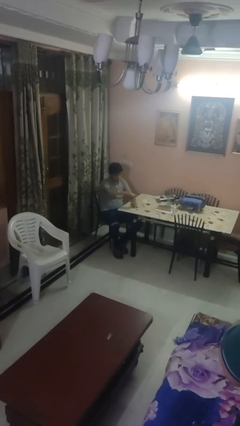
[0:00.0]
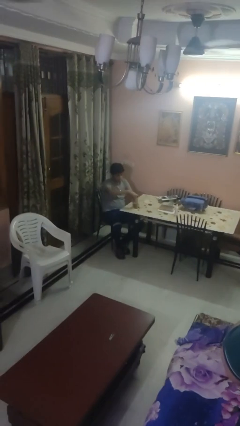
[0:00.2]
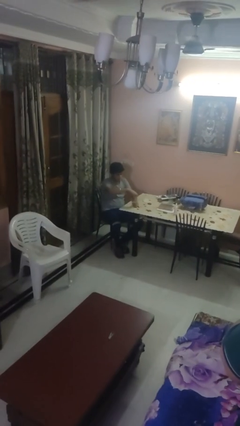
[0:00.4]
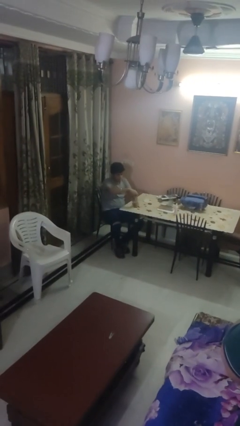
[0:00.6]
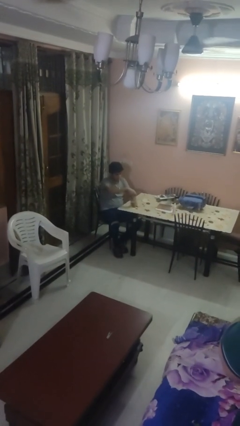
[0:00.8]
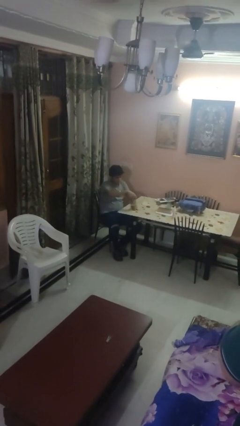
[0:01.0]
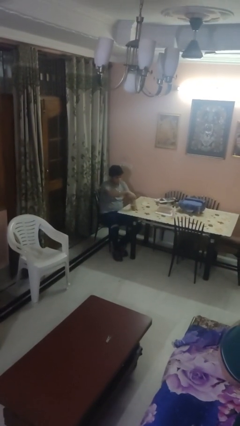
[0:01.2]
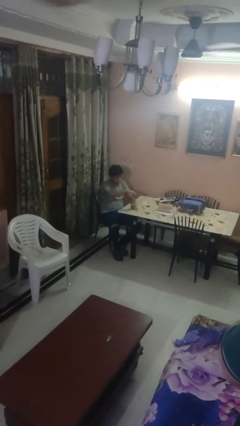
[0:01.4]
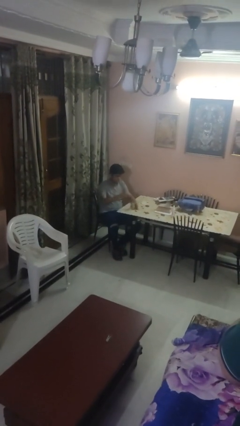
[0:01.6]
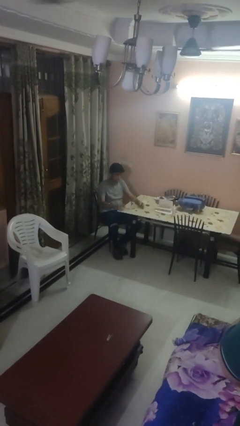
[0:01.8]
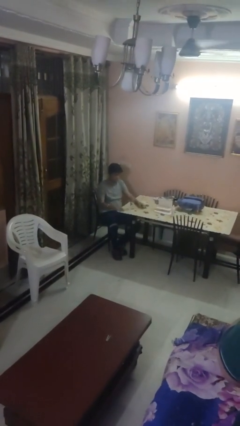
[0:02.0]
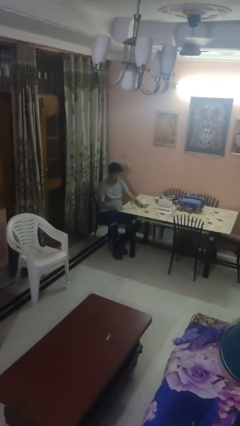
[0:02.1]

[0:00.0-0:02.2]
person unscrews lid from bottle

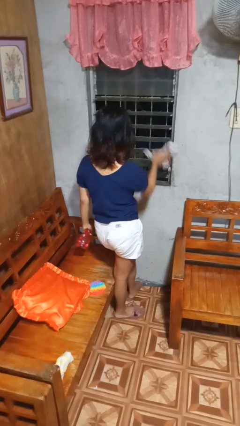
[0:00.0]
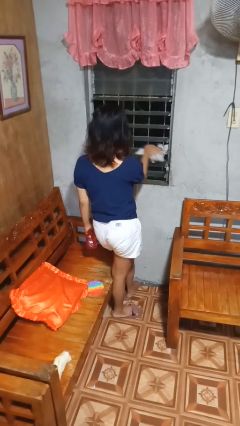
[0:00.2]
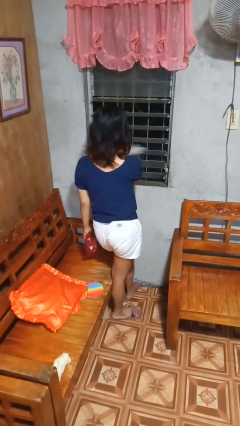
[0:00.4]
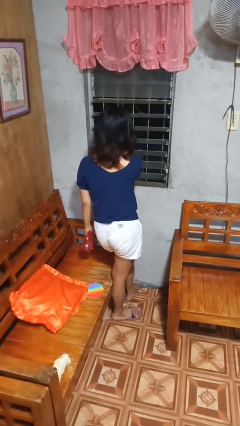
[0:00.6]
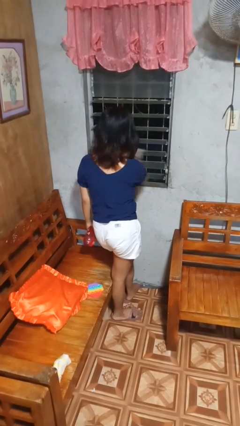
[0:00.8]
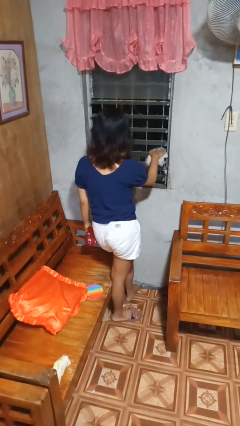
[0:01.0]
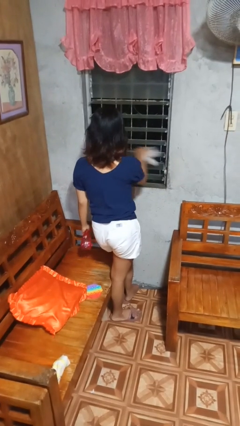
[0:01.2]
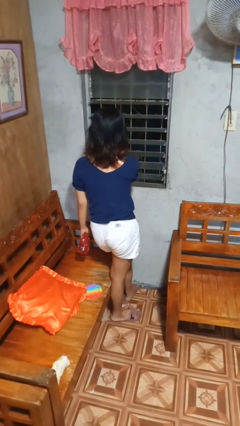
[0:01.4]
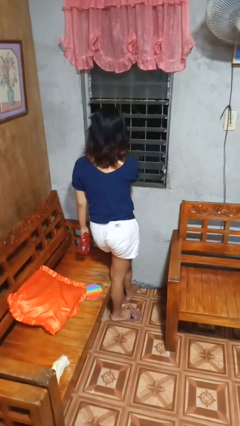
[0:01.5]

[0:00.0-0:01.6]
person washes window

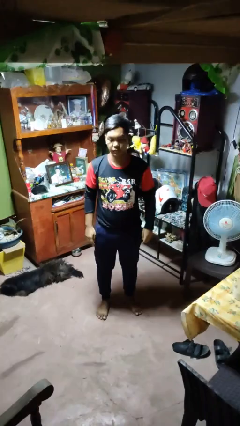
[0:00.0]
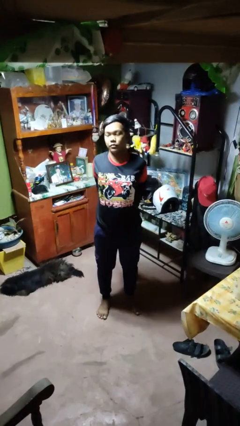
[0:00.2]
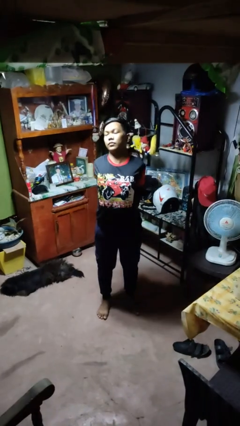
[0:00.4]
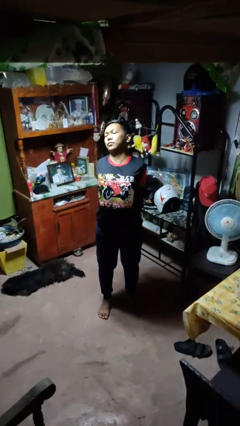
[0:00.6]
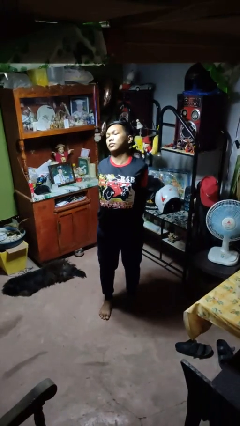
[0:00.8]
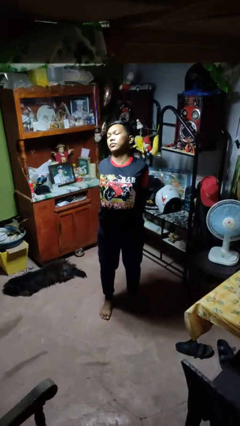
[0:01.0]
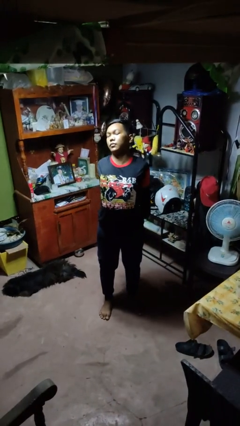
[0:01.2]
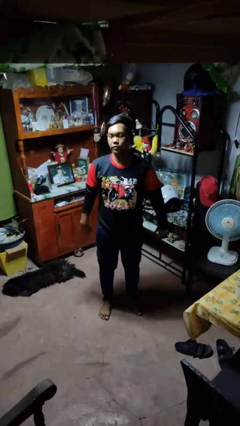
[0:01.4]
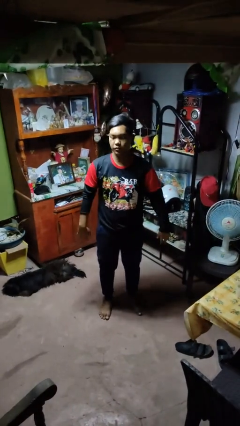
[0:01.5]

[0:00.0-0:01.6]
person stretches back

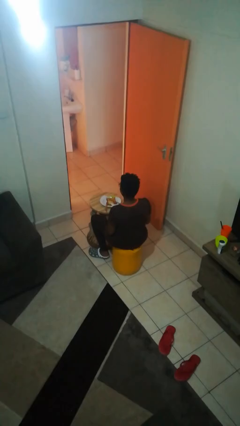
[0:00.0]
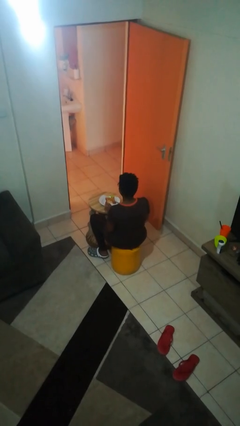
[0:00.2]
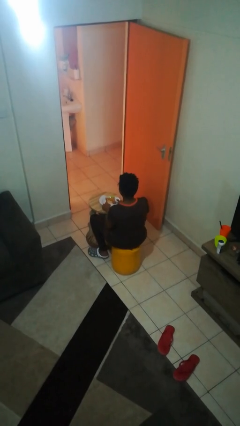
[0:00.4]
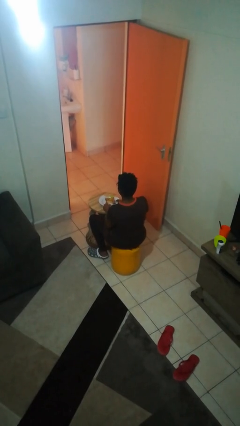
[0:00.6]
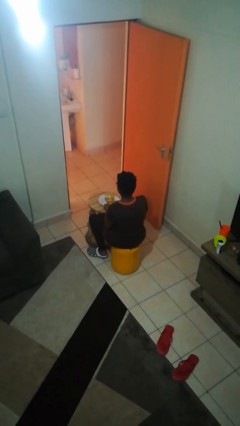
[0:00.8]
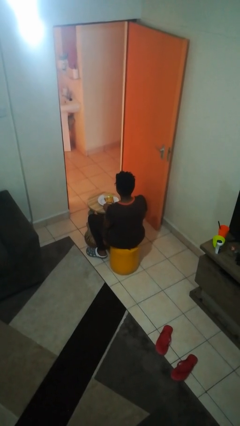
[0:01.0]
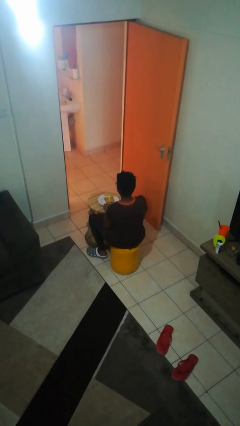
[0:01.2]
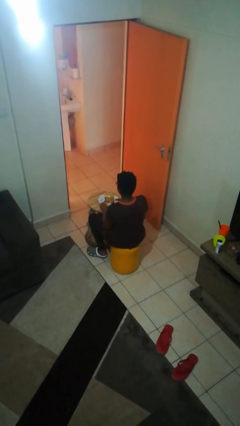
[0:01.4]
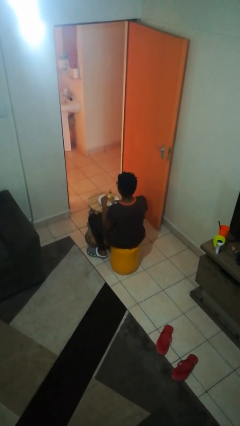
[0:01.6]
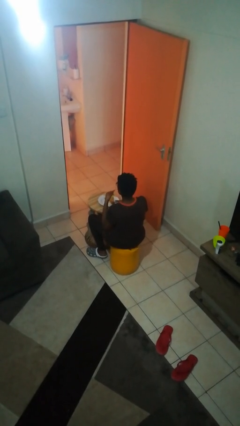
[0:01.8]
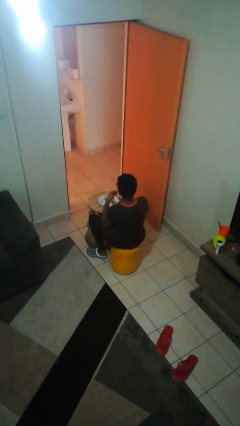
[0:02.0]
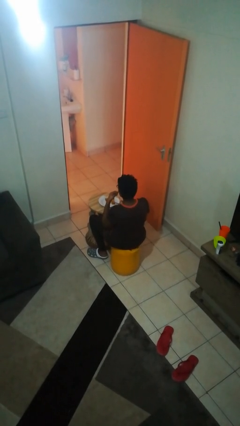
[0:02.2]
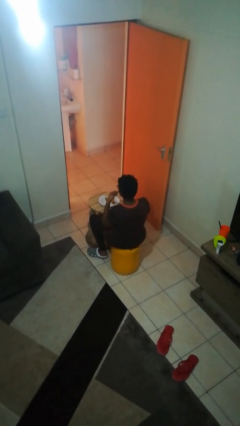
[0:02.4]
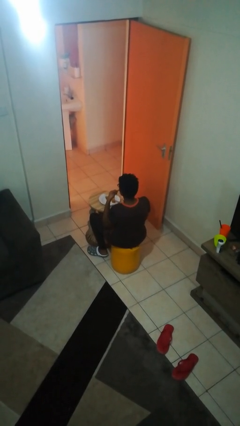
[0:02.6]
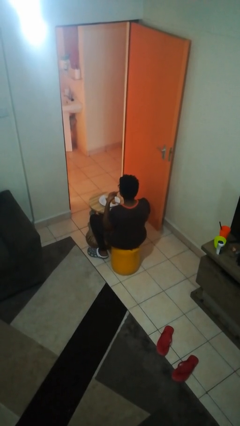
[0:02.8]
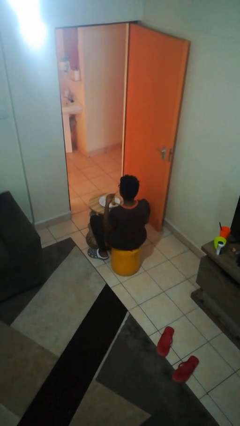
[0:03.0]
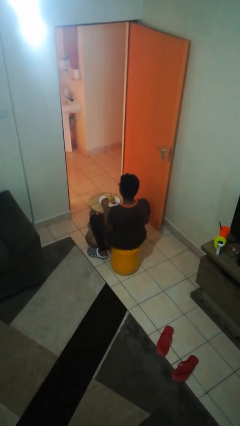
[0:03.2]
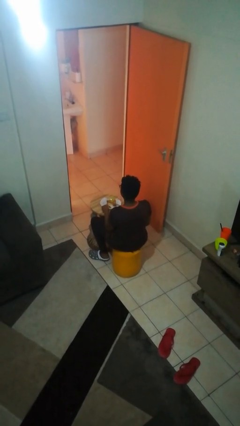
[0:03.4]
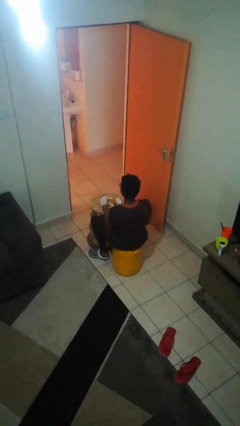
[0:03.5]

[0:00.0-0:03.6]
person eats with utensil

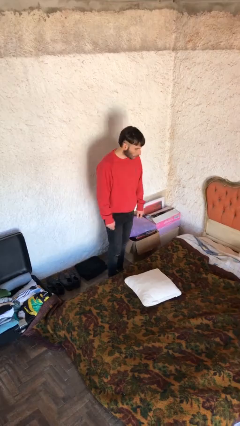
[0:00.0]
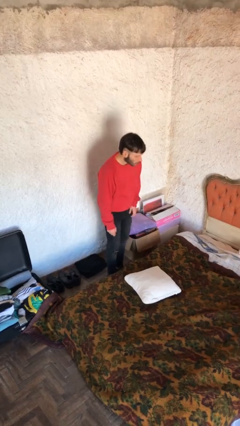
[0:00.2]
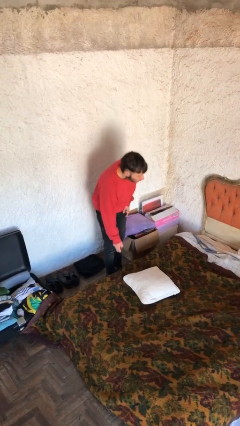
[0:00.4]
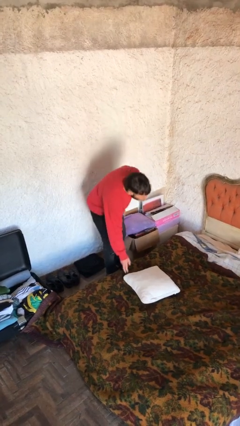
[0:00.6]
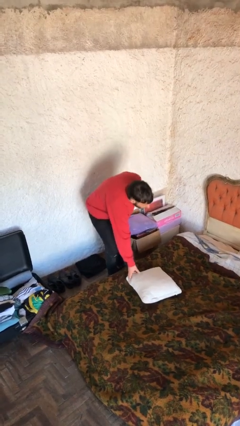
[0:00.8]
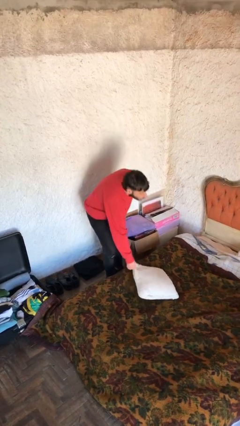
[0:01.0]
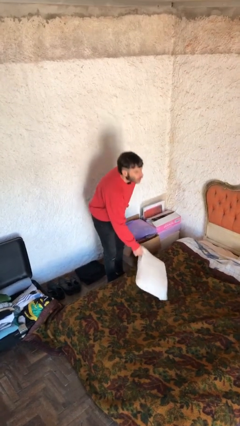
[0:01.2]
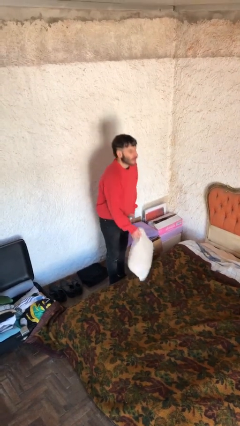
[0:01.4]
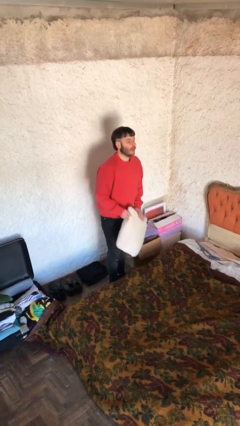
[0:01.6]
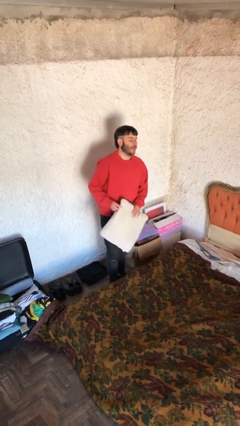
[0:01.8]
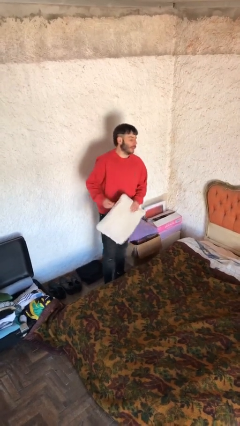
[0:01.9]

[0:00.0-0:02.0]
person picks up object from bed

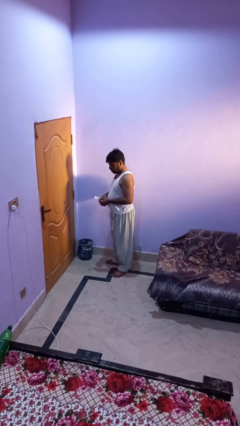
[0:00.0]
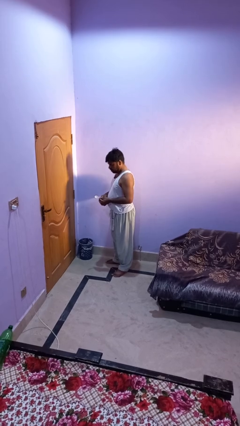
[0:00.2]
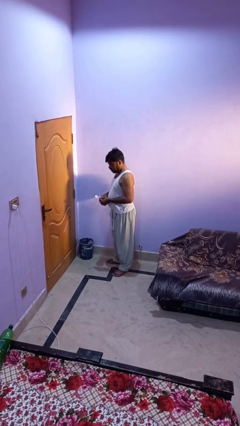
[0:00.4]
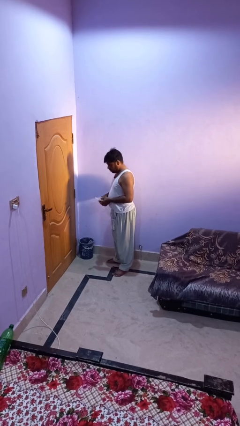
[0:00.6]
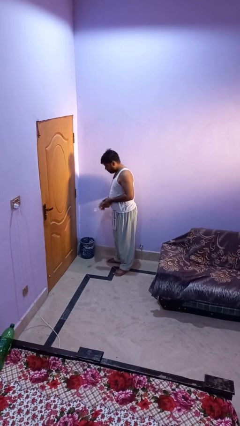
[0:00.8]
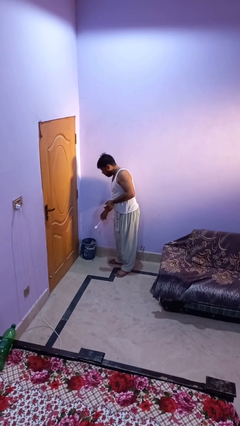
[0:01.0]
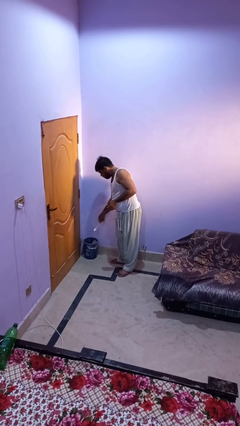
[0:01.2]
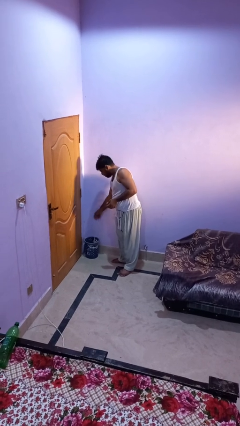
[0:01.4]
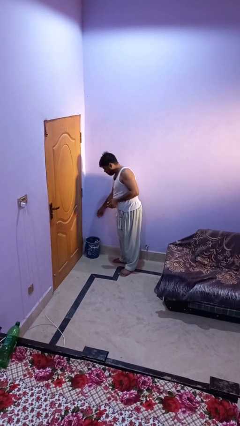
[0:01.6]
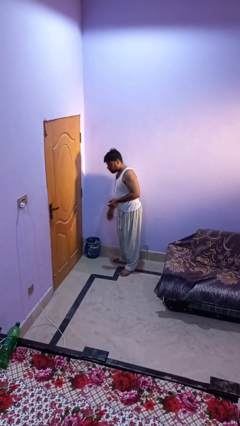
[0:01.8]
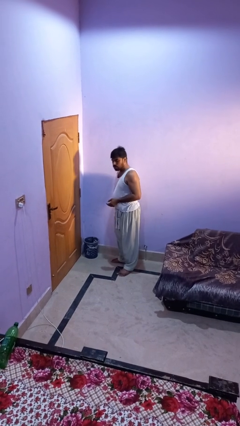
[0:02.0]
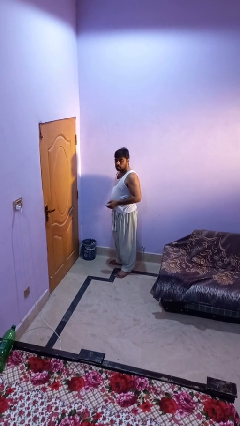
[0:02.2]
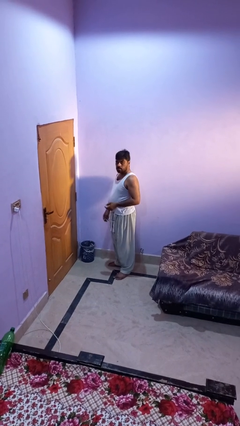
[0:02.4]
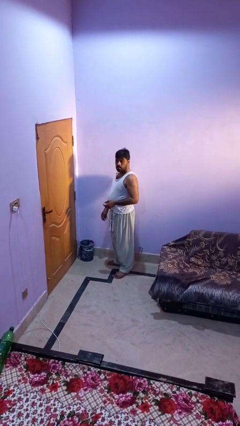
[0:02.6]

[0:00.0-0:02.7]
person discards trash

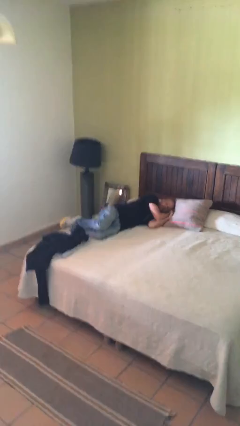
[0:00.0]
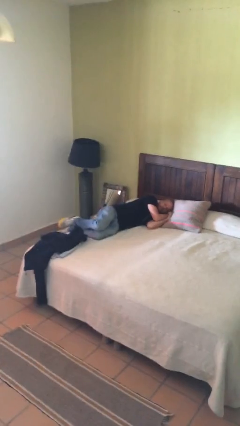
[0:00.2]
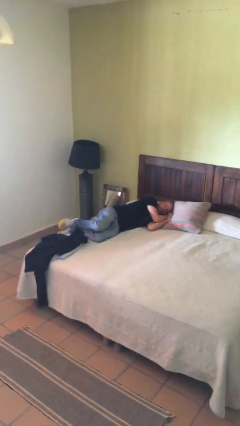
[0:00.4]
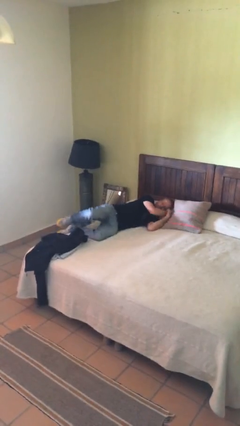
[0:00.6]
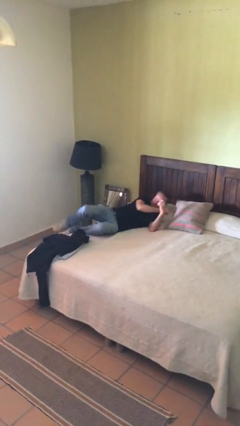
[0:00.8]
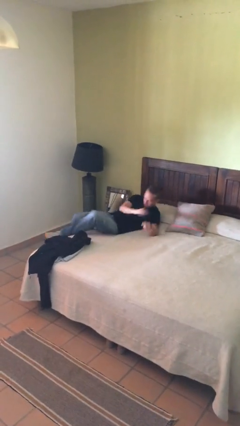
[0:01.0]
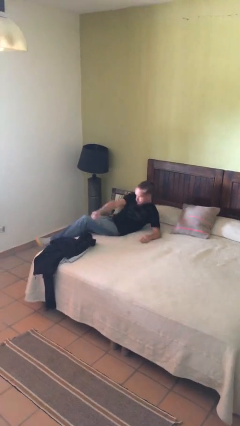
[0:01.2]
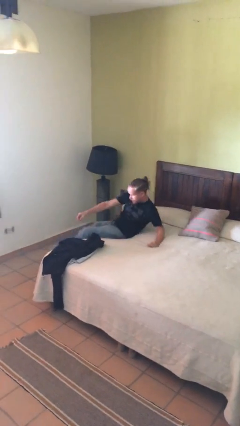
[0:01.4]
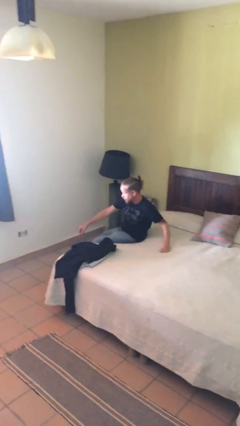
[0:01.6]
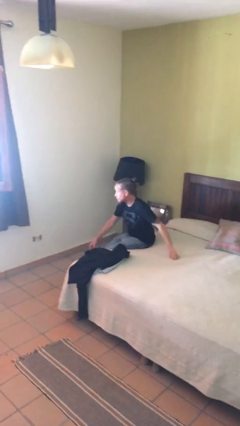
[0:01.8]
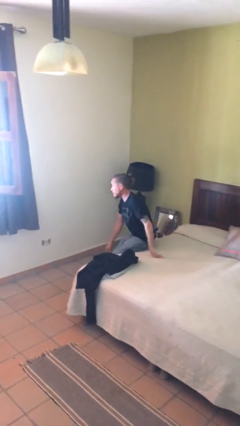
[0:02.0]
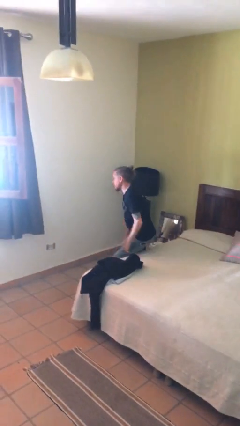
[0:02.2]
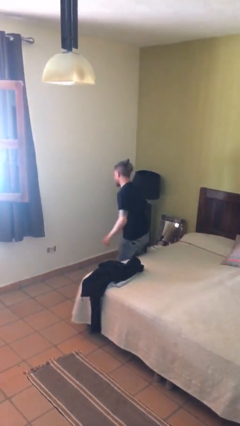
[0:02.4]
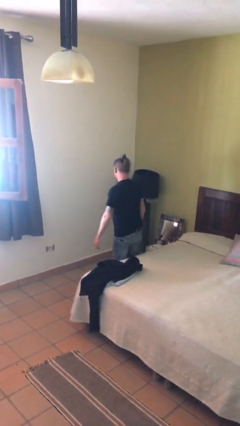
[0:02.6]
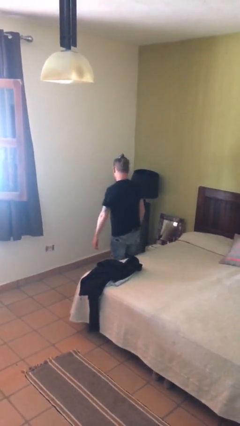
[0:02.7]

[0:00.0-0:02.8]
person stands up

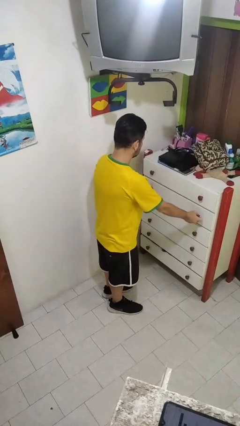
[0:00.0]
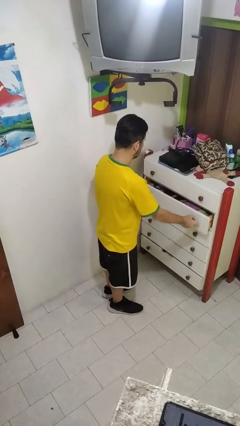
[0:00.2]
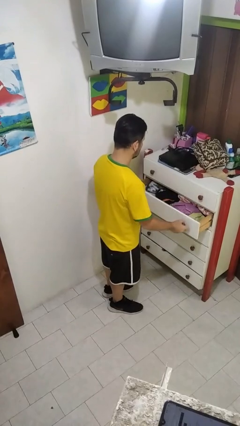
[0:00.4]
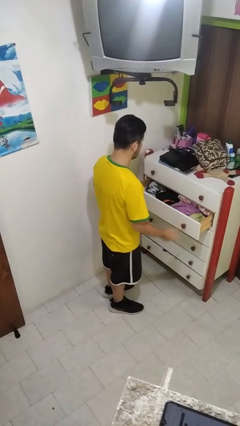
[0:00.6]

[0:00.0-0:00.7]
person opens dresser drawer
